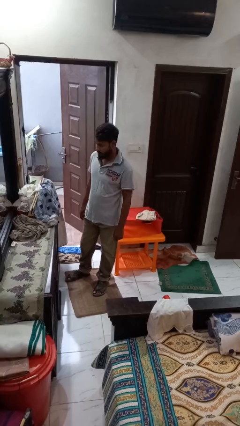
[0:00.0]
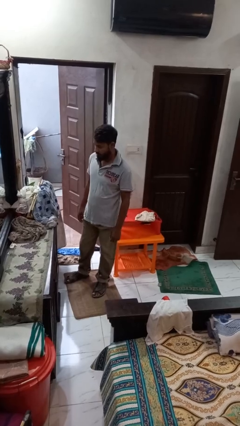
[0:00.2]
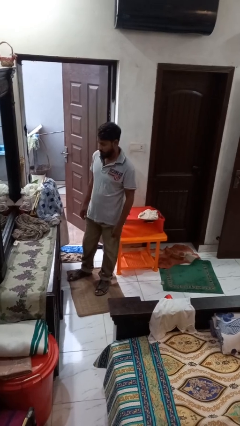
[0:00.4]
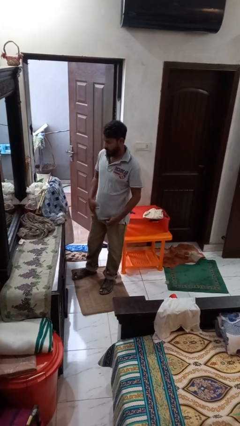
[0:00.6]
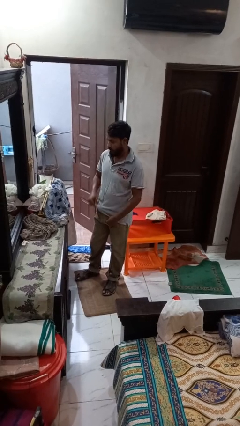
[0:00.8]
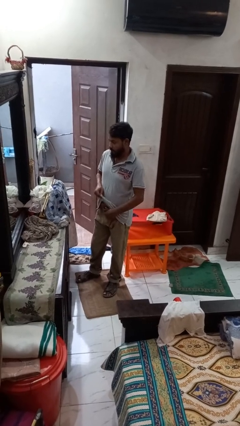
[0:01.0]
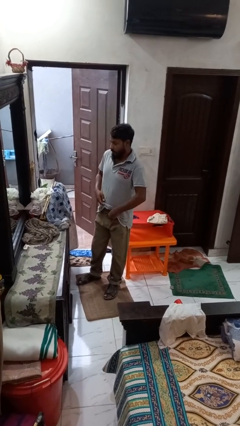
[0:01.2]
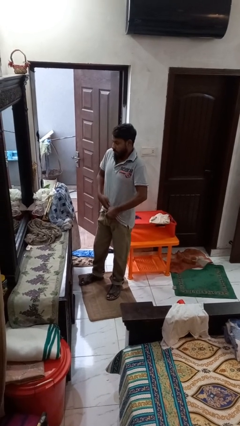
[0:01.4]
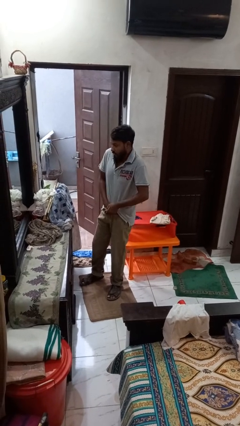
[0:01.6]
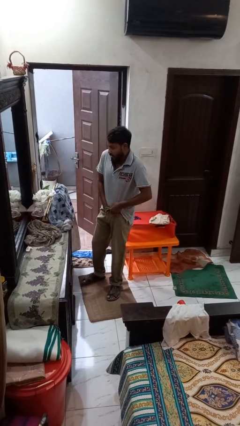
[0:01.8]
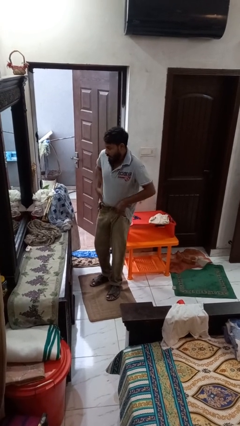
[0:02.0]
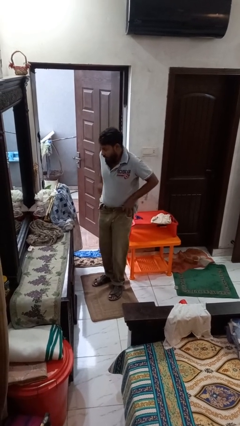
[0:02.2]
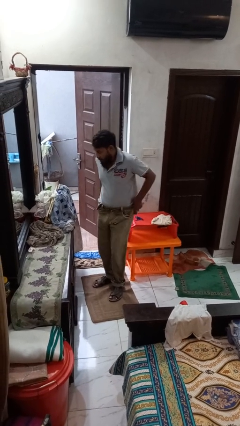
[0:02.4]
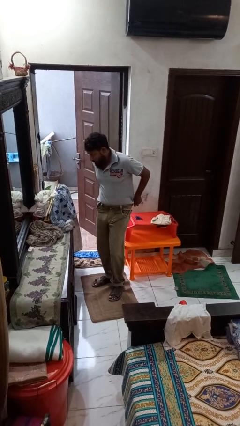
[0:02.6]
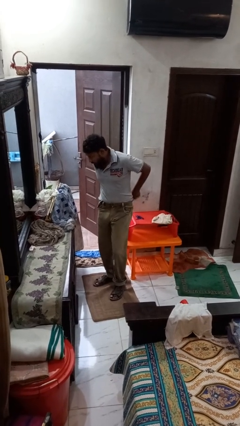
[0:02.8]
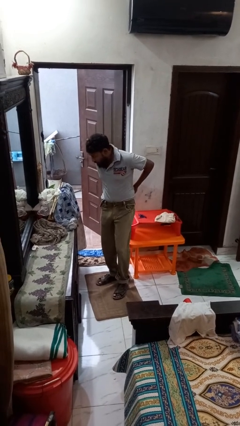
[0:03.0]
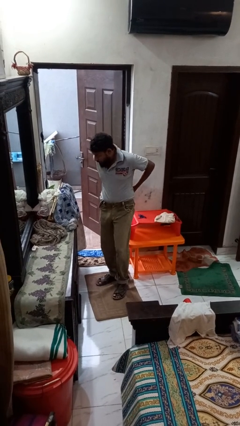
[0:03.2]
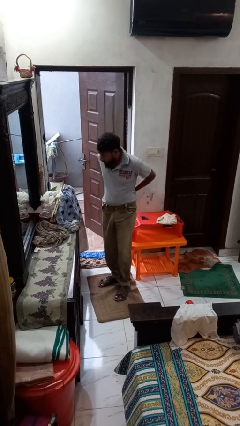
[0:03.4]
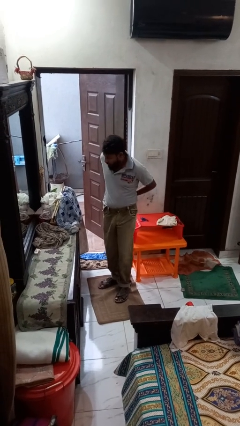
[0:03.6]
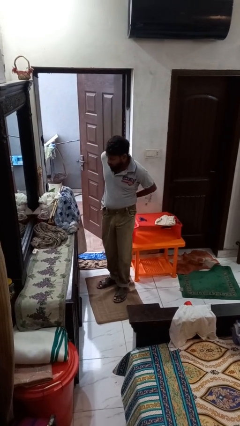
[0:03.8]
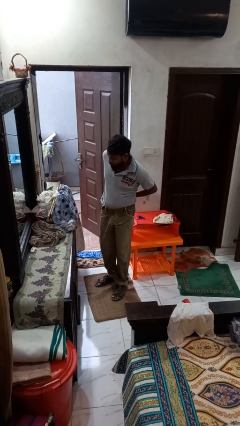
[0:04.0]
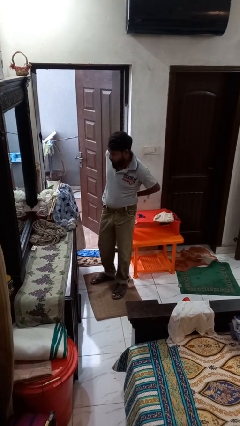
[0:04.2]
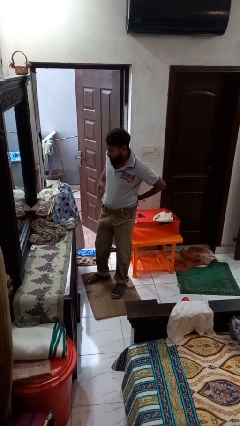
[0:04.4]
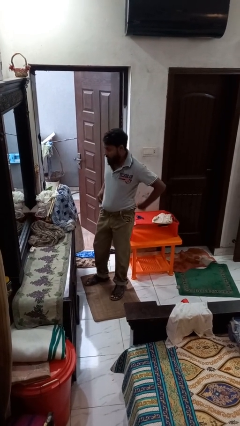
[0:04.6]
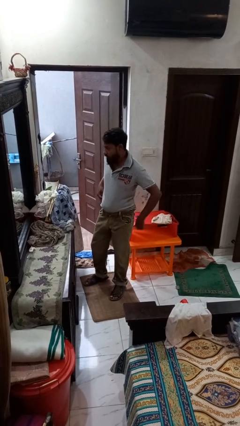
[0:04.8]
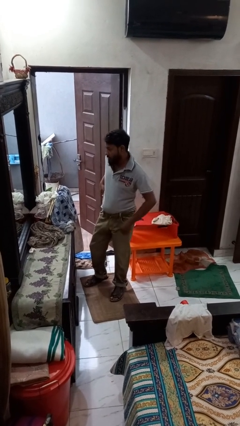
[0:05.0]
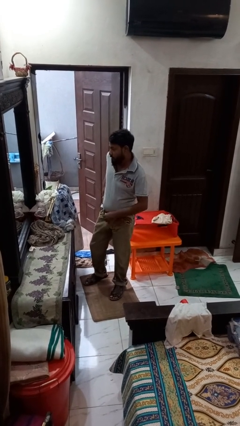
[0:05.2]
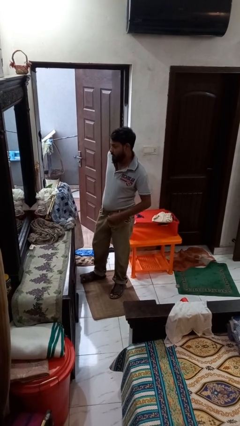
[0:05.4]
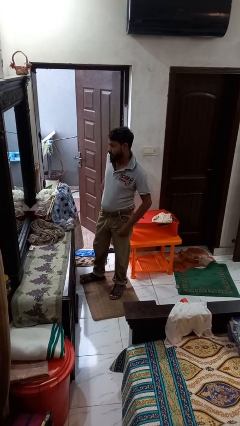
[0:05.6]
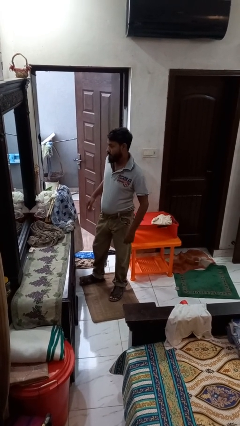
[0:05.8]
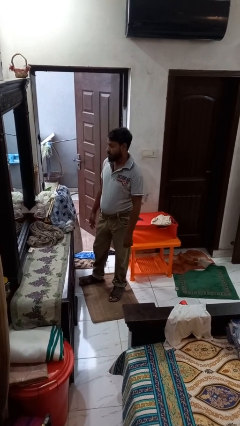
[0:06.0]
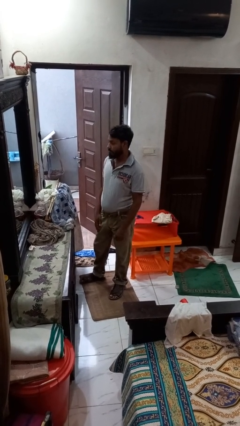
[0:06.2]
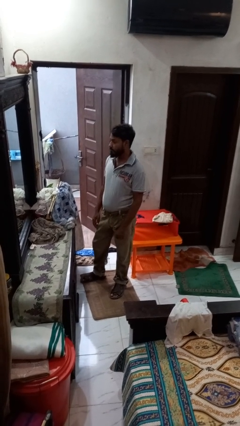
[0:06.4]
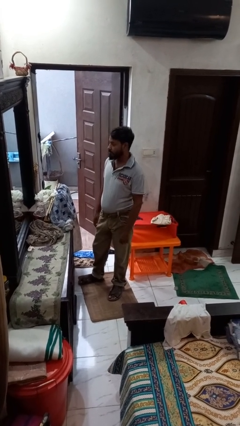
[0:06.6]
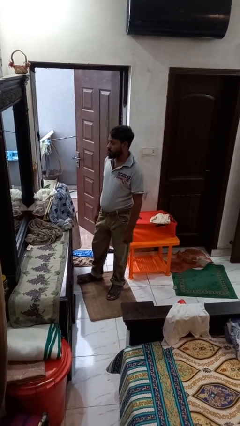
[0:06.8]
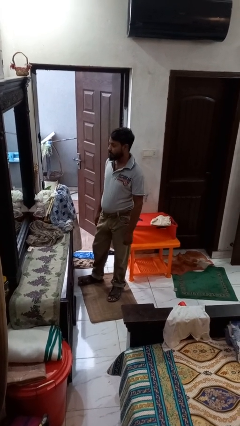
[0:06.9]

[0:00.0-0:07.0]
person tucks in shirt

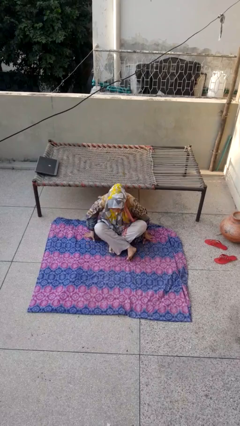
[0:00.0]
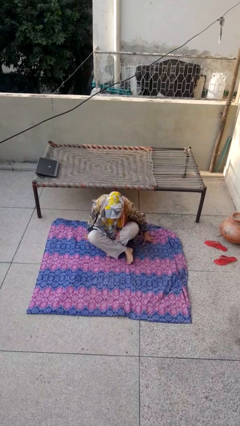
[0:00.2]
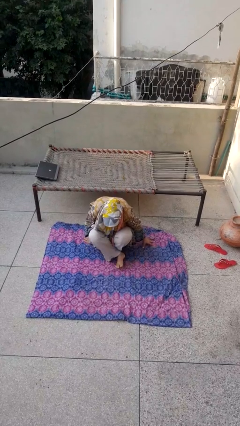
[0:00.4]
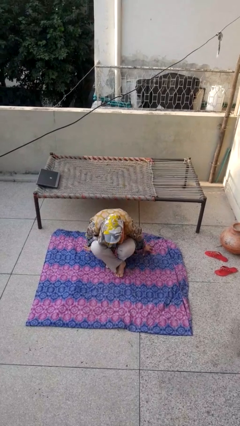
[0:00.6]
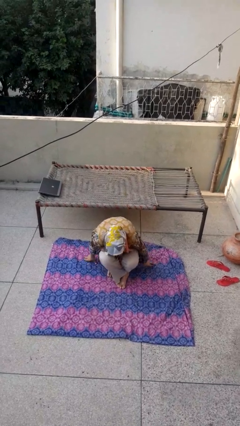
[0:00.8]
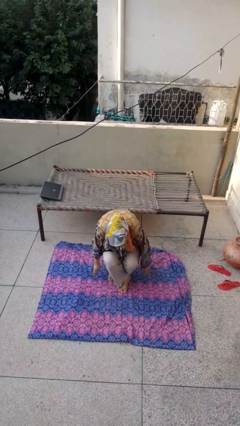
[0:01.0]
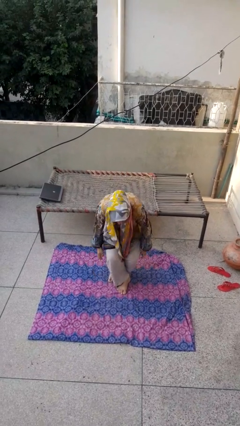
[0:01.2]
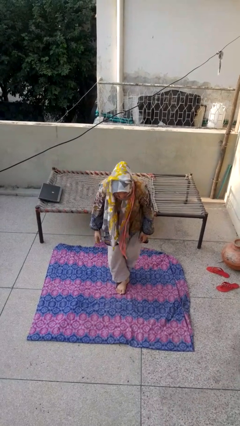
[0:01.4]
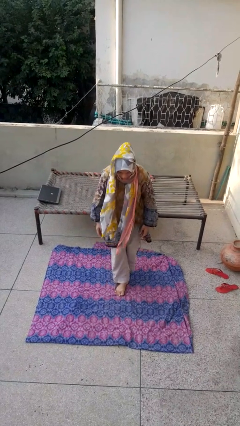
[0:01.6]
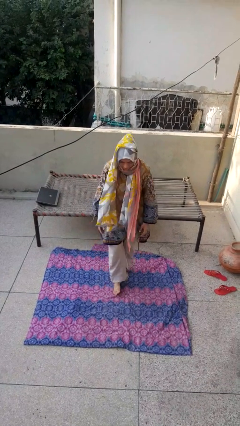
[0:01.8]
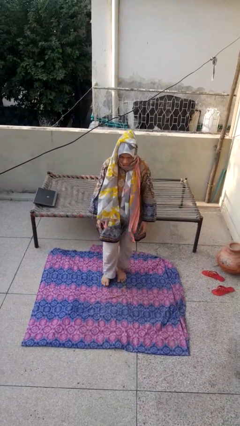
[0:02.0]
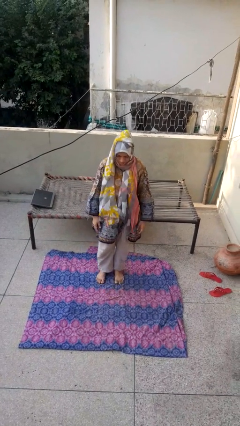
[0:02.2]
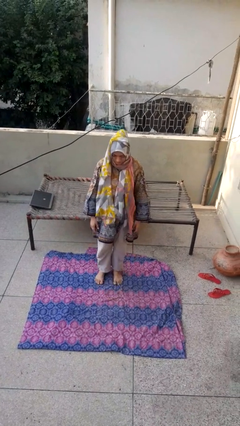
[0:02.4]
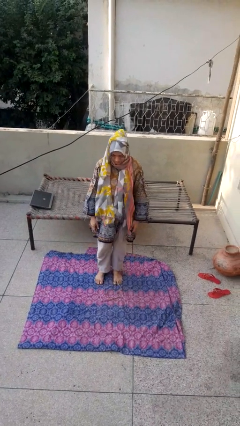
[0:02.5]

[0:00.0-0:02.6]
person stands up from floor

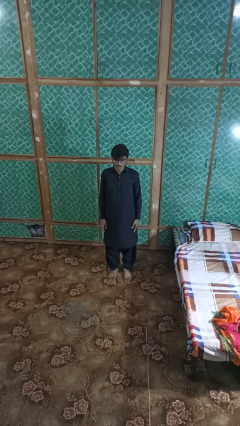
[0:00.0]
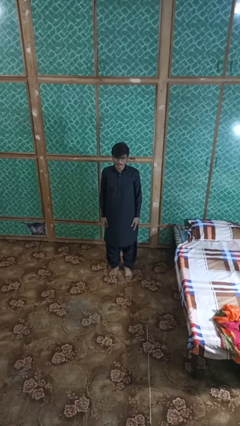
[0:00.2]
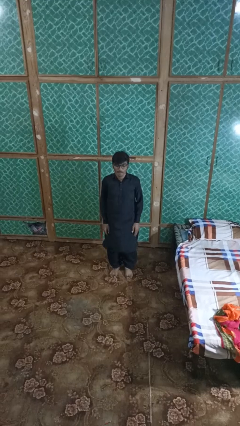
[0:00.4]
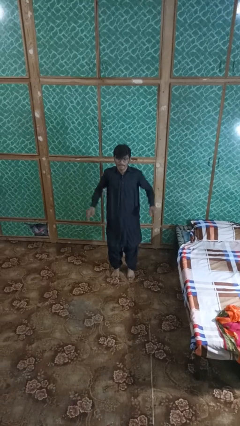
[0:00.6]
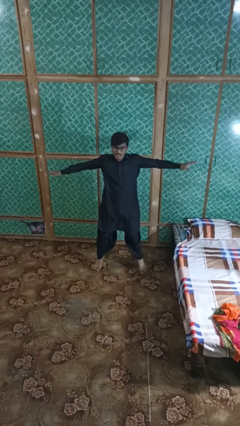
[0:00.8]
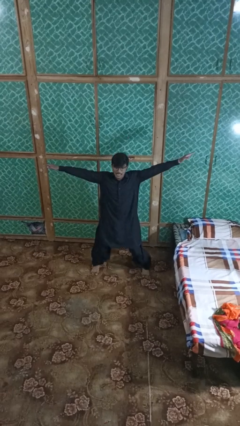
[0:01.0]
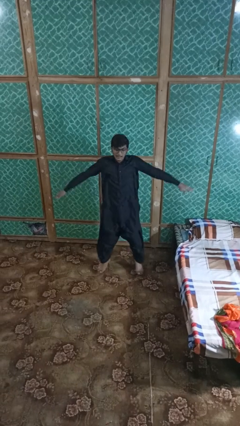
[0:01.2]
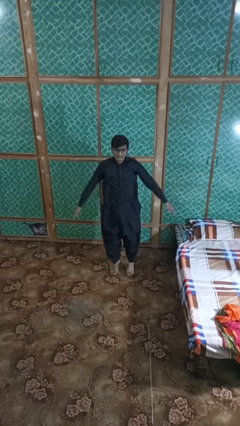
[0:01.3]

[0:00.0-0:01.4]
person exercises with jumping jacks

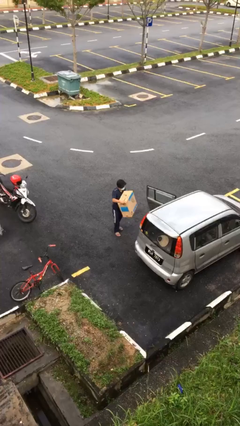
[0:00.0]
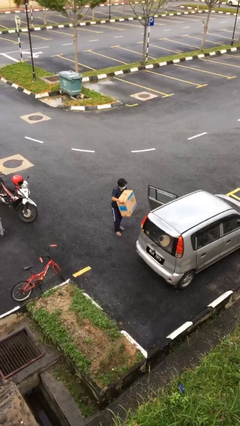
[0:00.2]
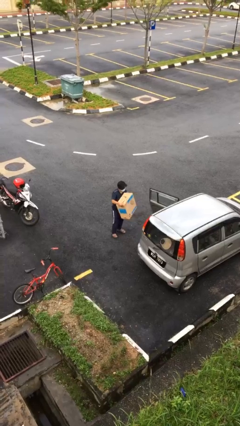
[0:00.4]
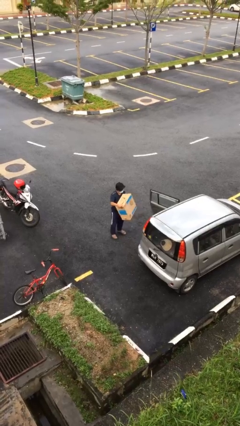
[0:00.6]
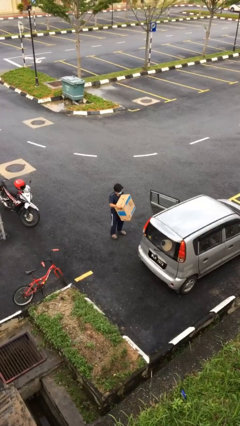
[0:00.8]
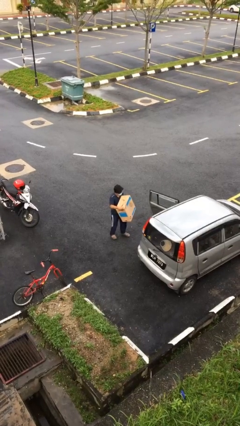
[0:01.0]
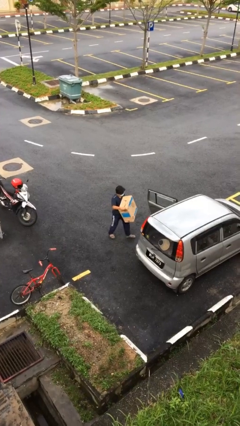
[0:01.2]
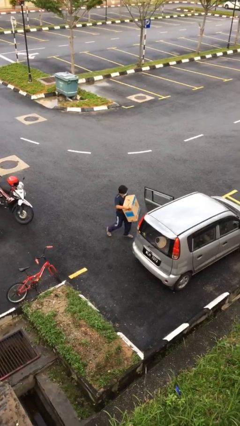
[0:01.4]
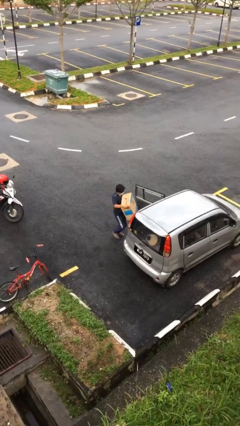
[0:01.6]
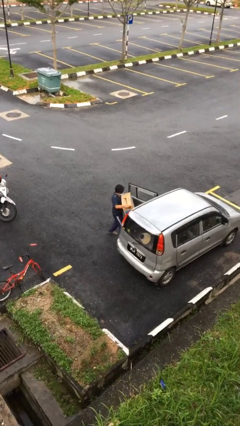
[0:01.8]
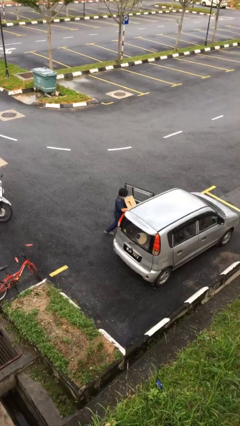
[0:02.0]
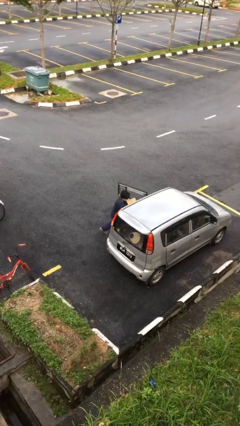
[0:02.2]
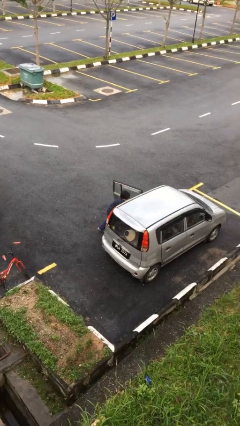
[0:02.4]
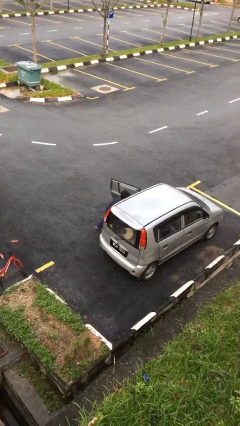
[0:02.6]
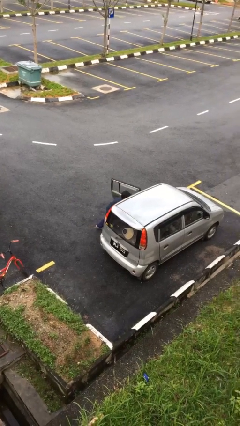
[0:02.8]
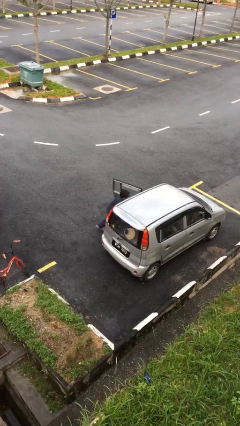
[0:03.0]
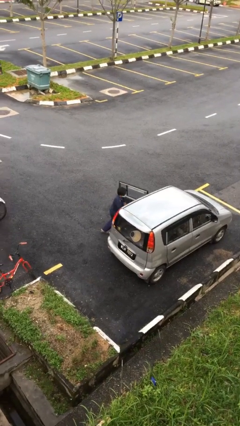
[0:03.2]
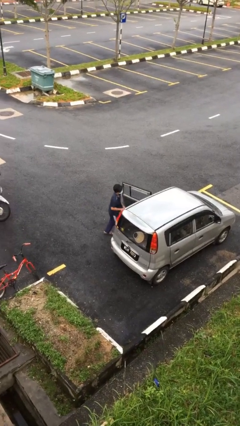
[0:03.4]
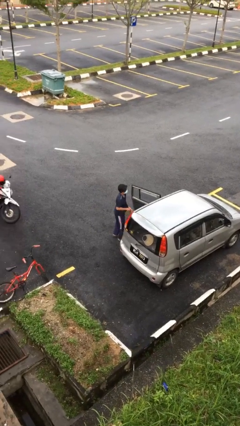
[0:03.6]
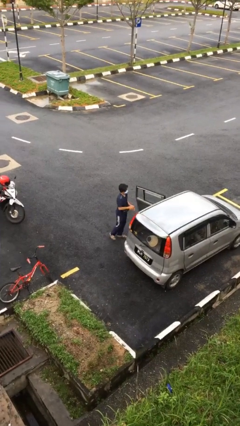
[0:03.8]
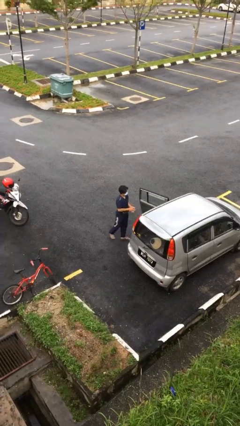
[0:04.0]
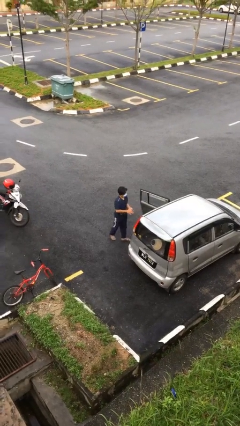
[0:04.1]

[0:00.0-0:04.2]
person loads car

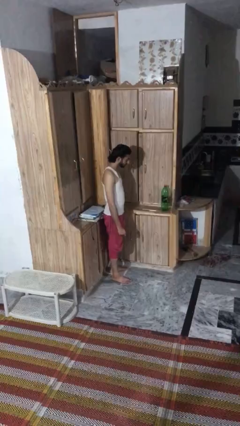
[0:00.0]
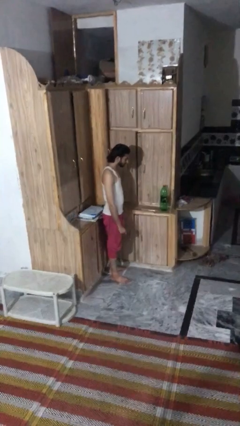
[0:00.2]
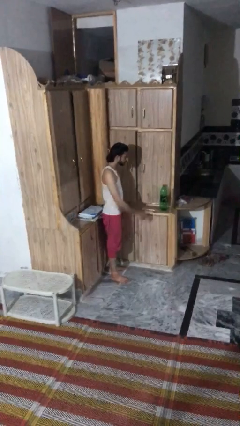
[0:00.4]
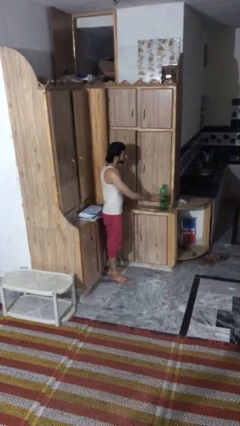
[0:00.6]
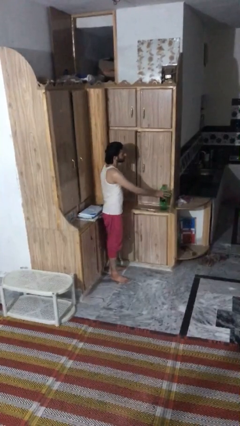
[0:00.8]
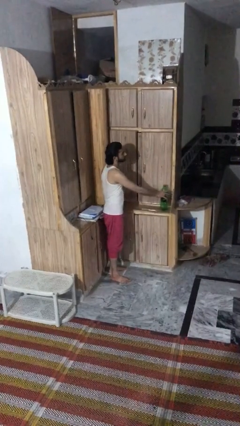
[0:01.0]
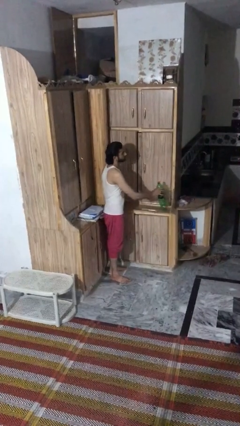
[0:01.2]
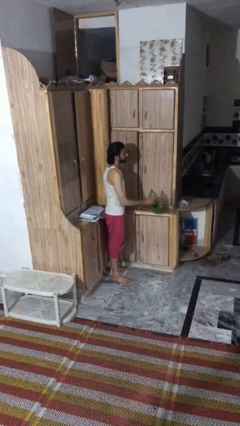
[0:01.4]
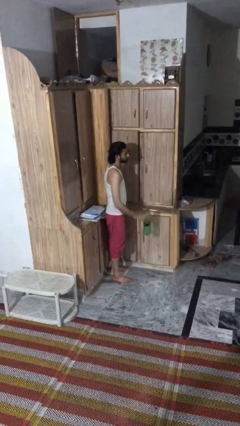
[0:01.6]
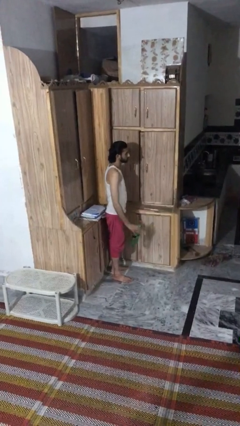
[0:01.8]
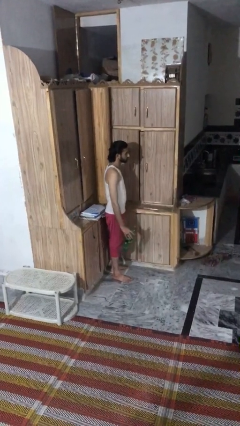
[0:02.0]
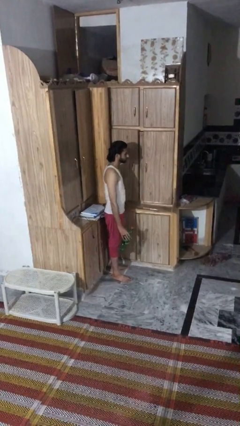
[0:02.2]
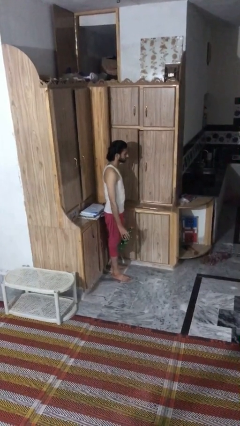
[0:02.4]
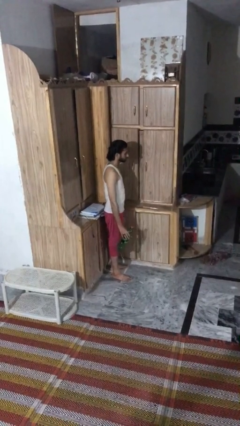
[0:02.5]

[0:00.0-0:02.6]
person picks up object from countertop
